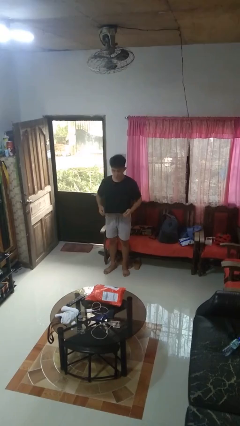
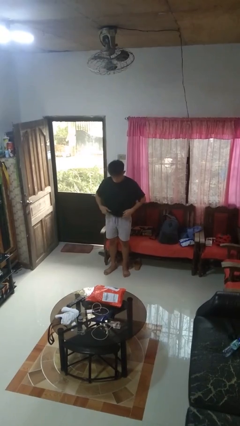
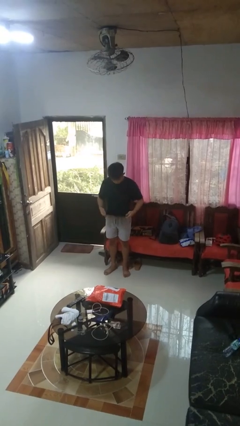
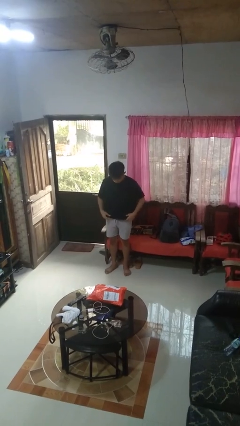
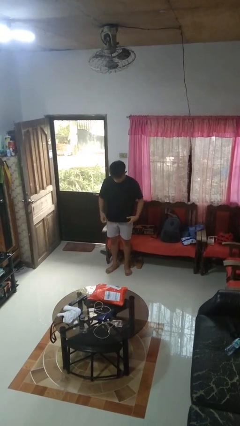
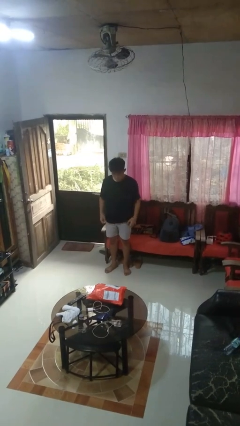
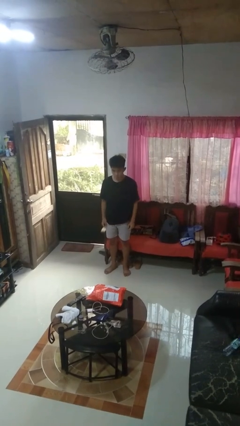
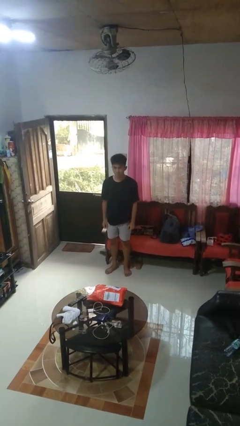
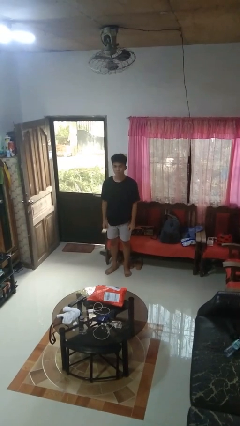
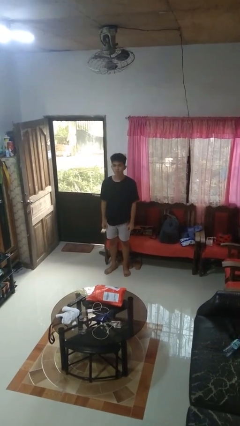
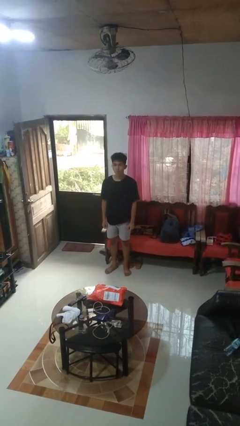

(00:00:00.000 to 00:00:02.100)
person untucks shirt

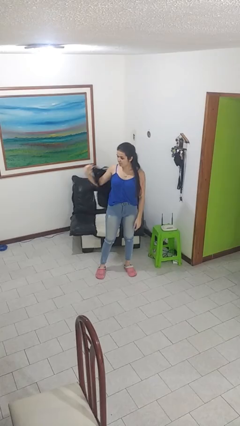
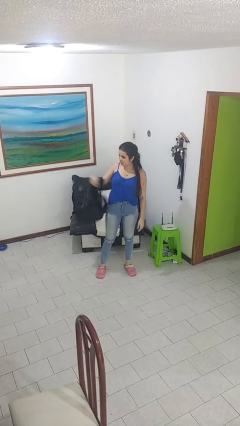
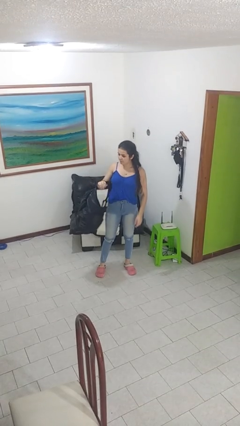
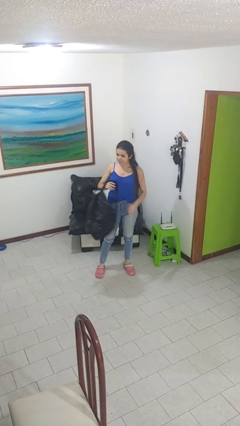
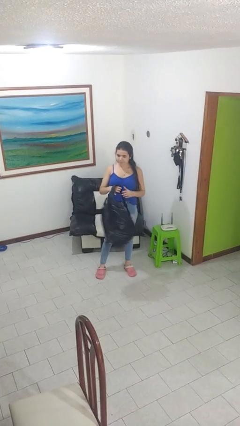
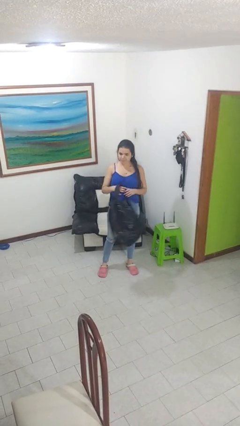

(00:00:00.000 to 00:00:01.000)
person takes off backpack

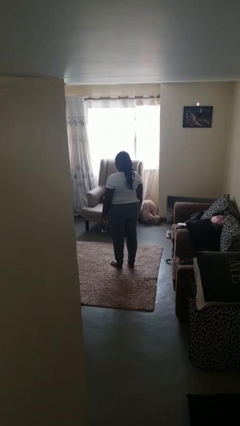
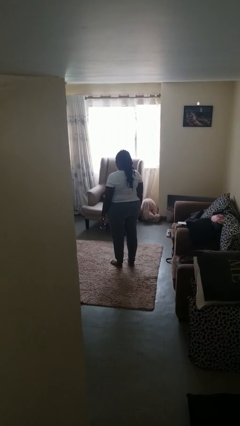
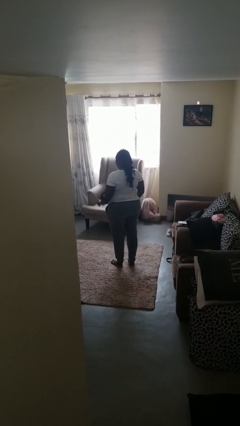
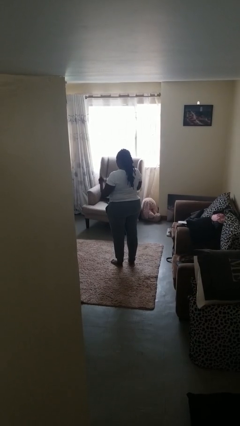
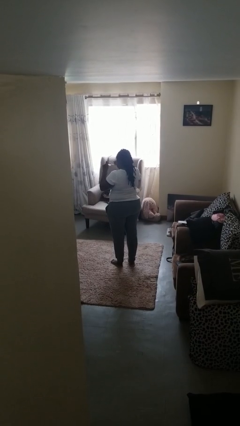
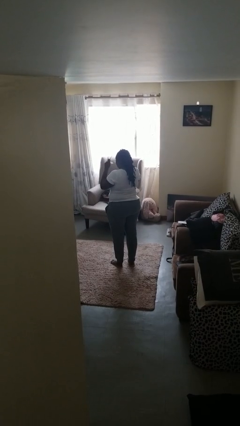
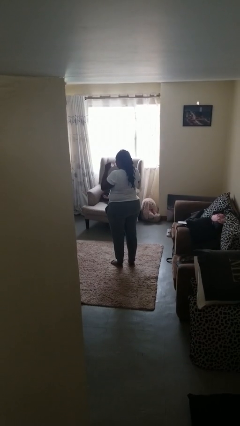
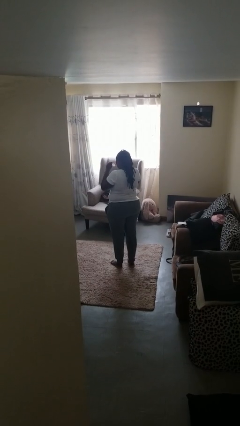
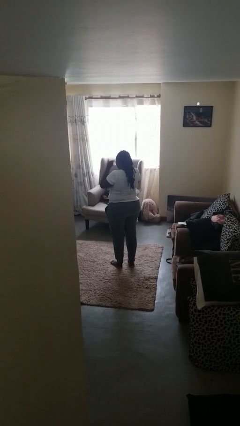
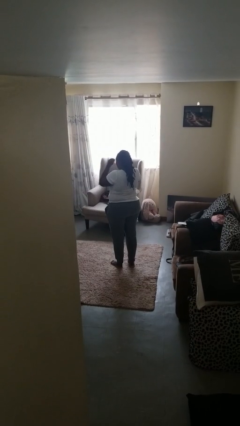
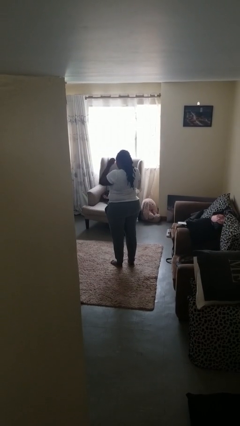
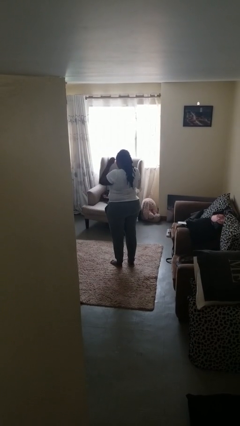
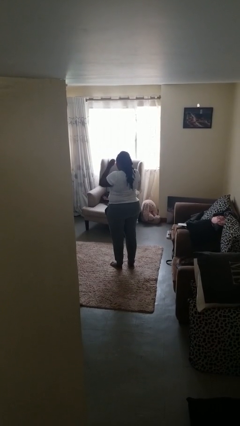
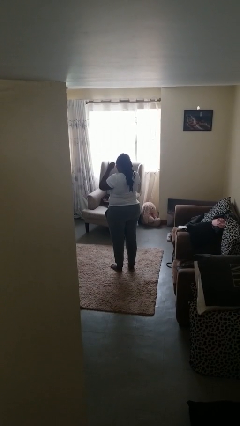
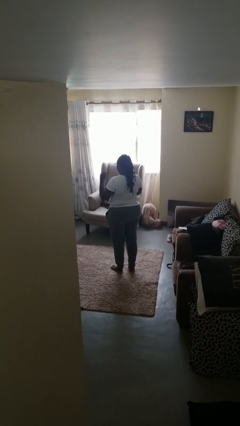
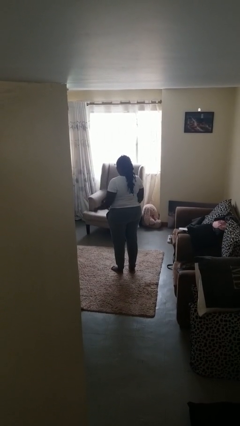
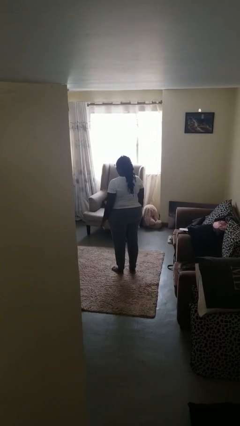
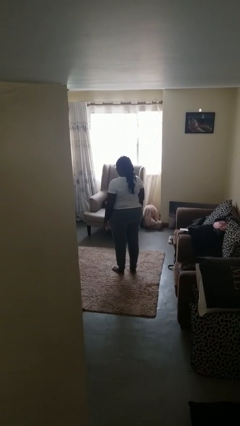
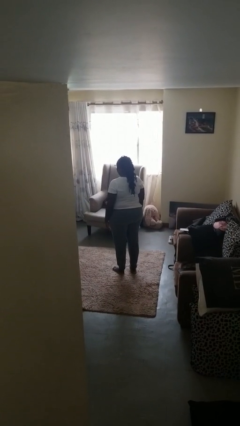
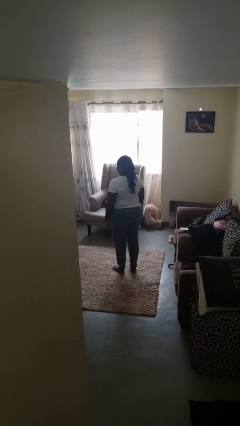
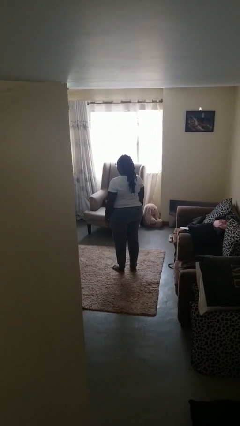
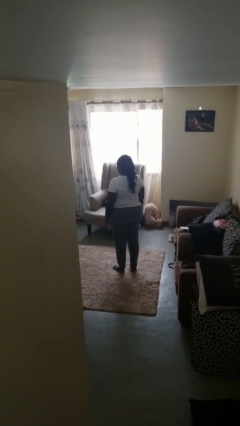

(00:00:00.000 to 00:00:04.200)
person puts on glasses

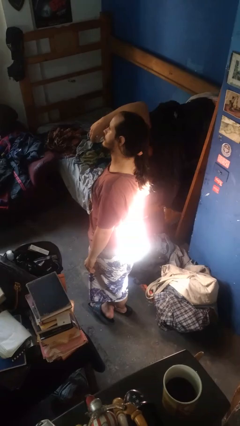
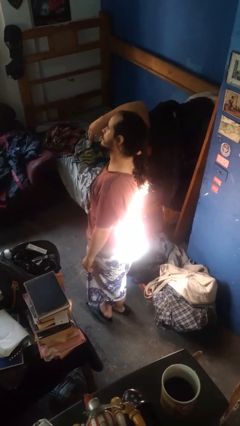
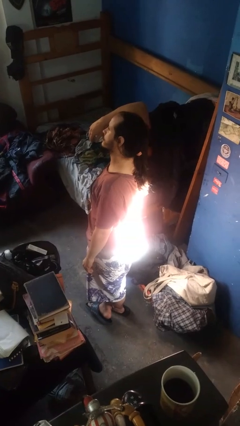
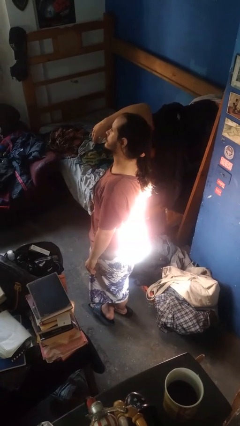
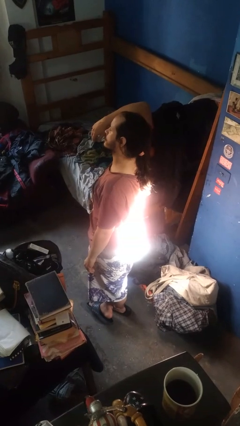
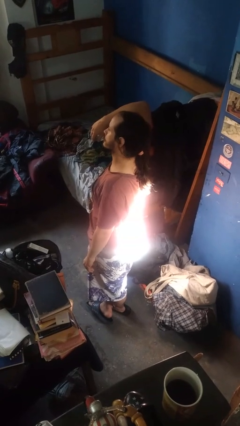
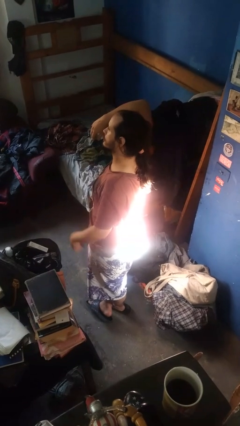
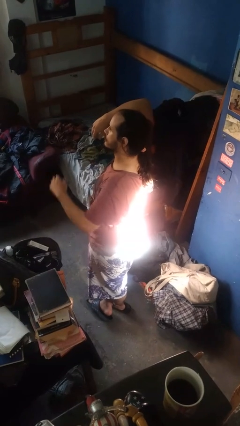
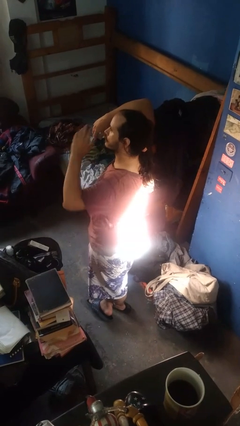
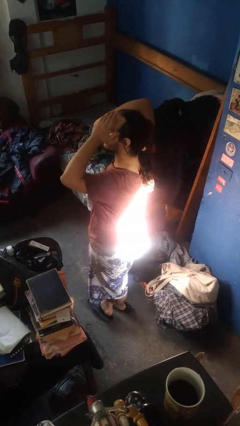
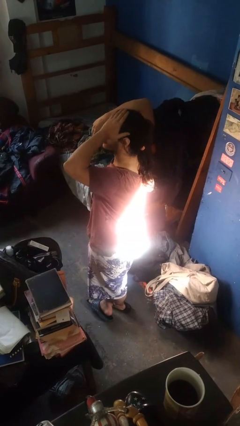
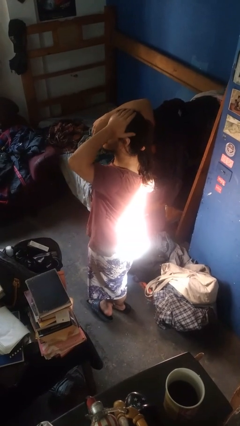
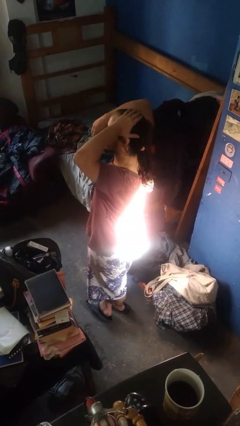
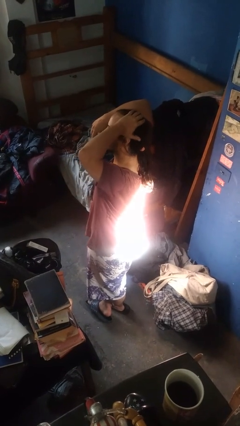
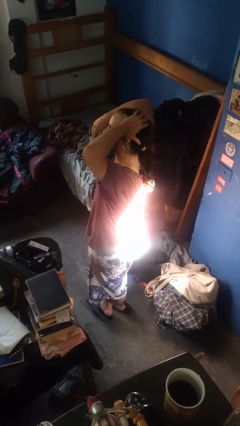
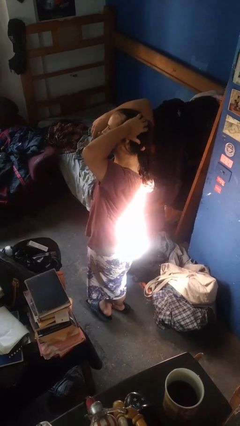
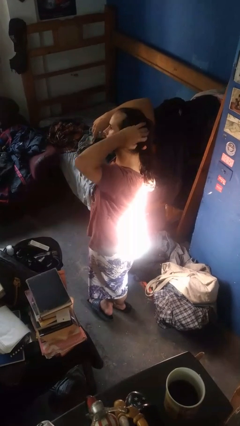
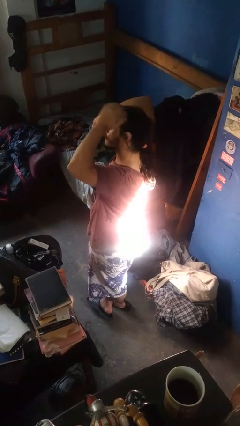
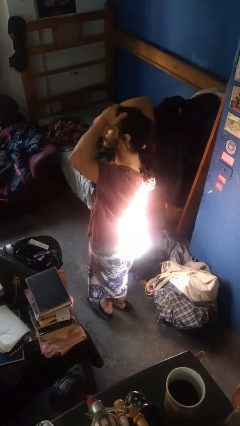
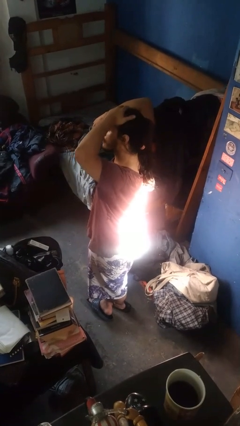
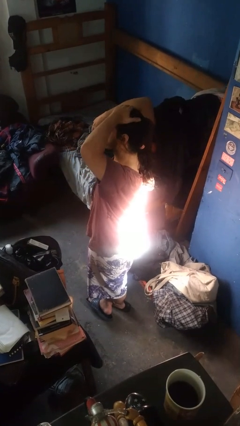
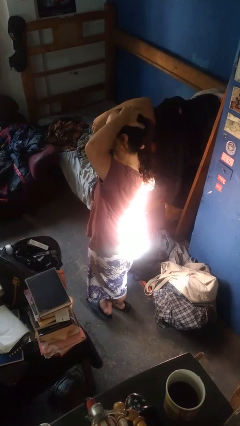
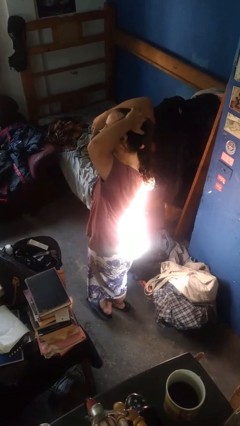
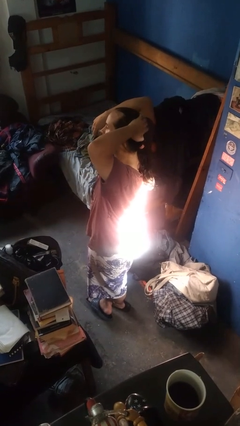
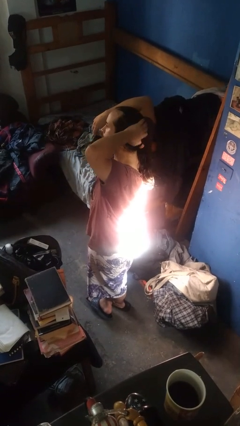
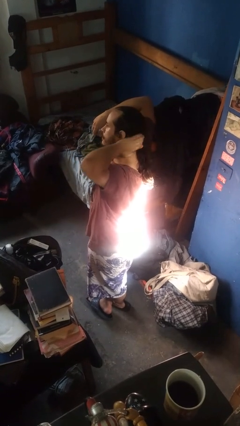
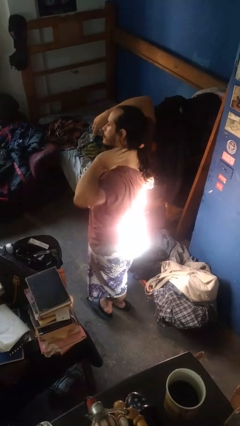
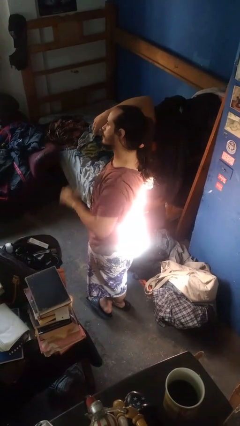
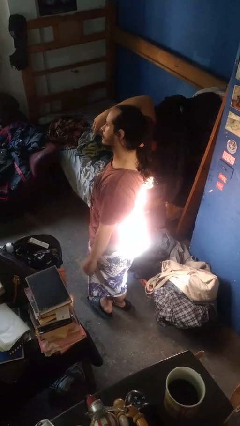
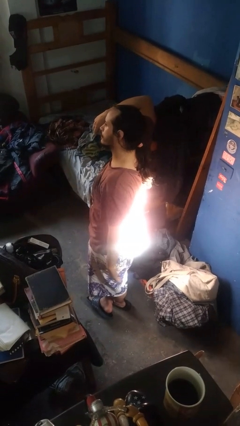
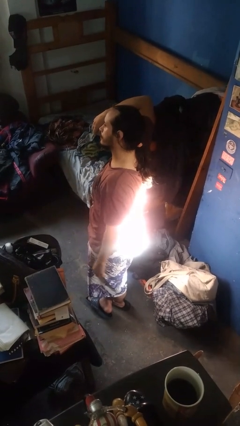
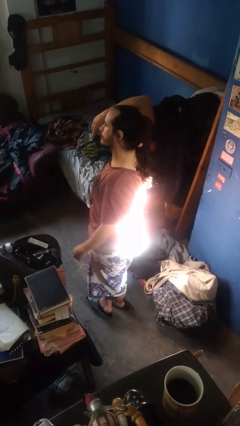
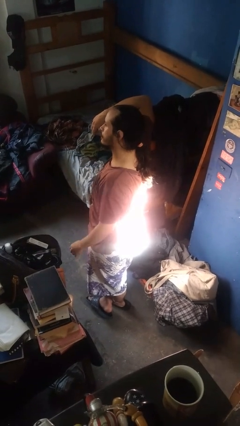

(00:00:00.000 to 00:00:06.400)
person strokes hair

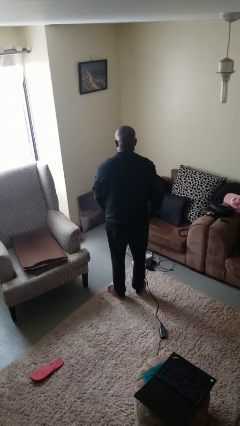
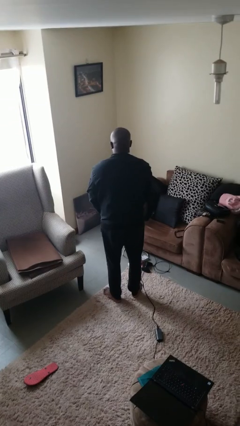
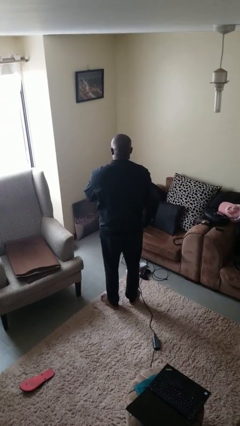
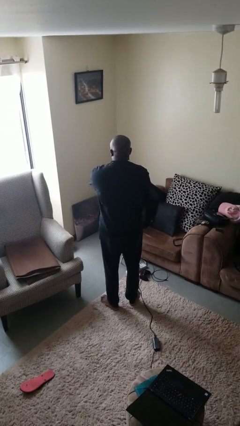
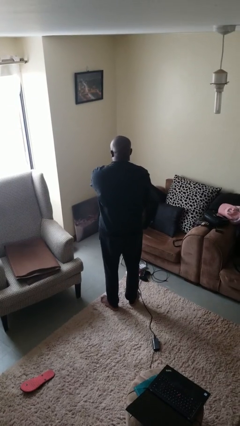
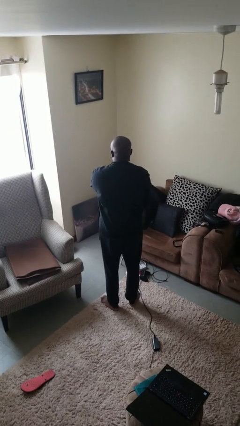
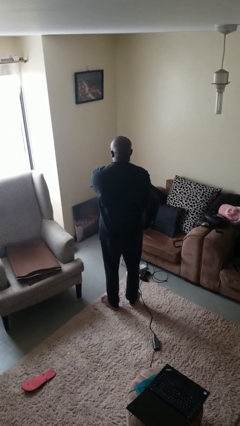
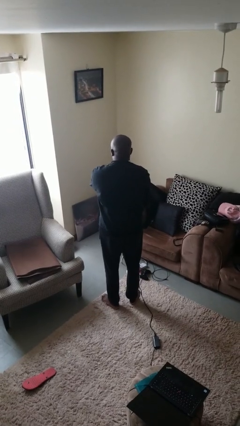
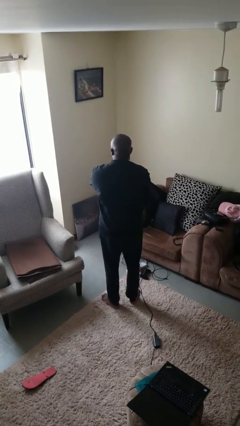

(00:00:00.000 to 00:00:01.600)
person zips up jacket

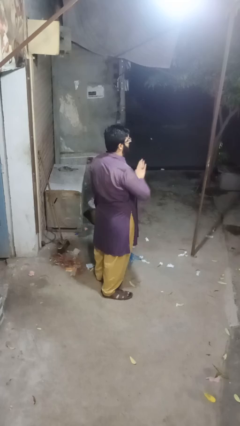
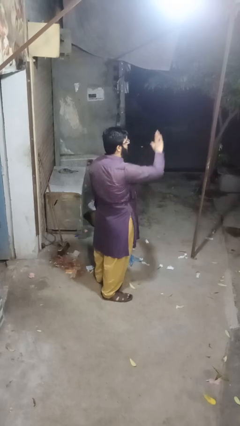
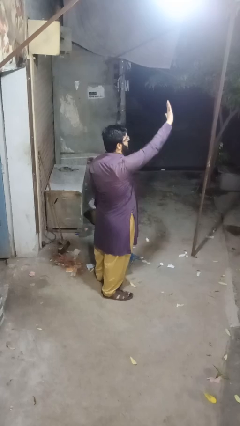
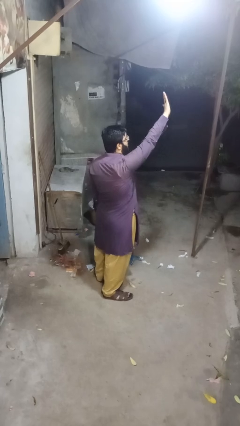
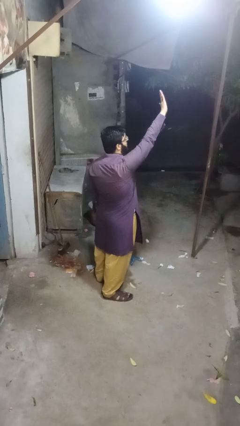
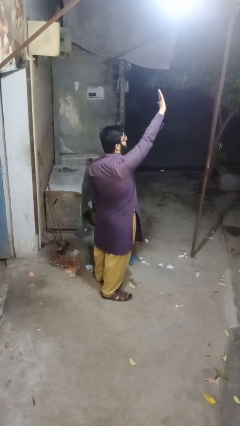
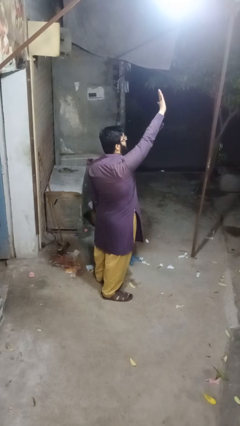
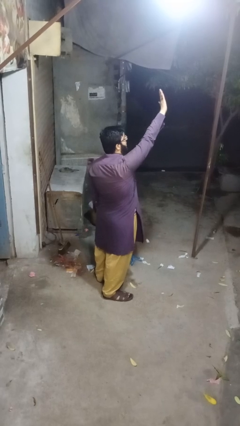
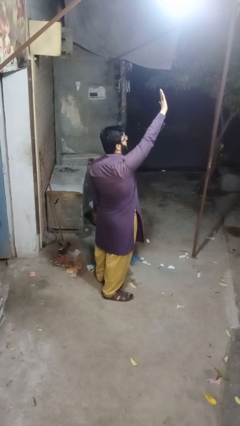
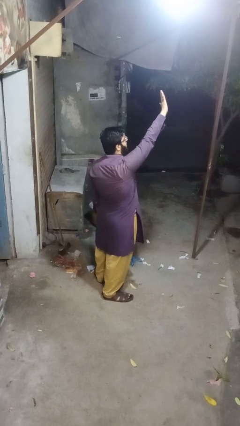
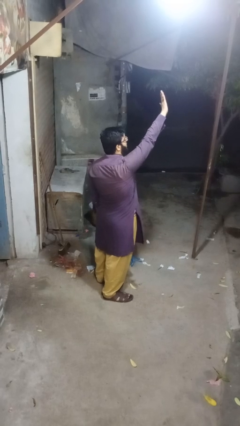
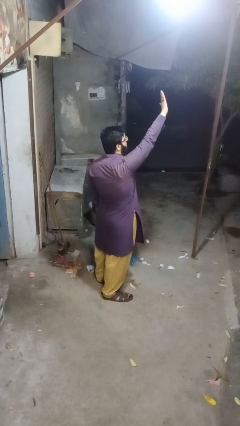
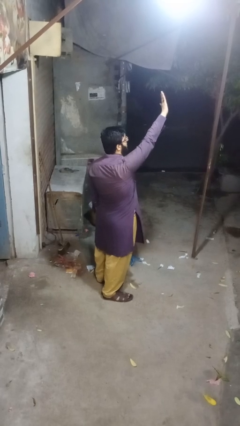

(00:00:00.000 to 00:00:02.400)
person gestures swipe up
